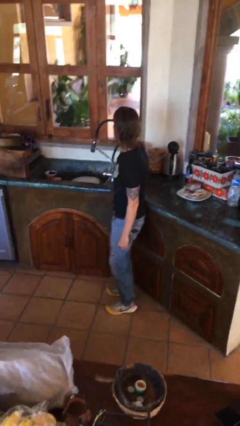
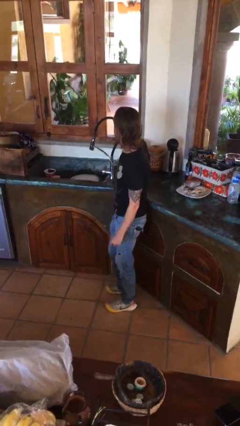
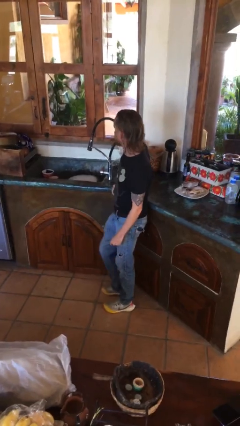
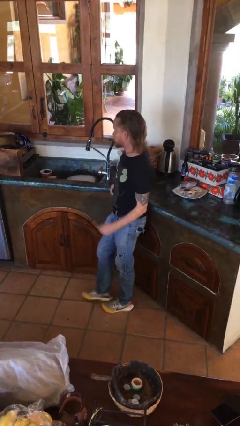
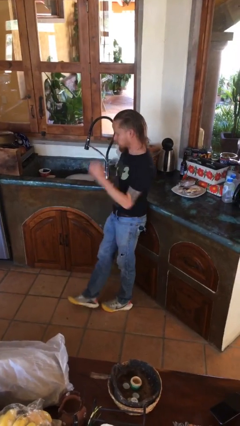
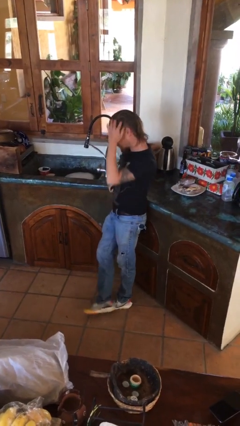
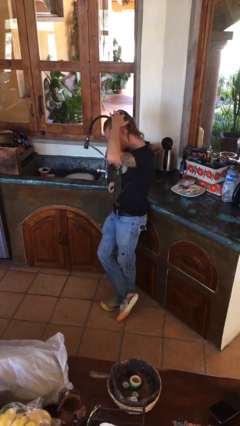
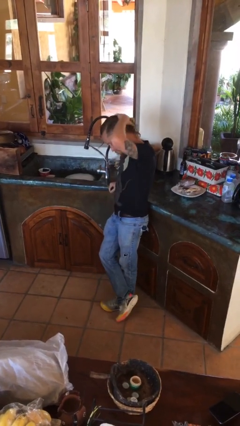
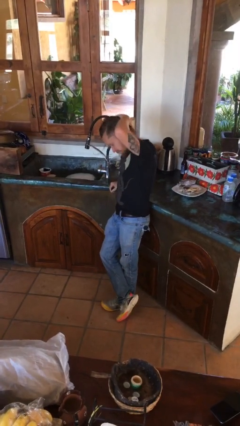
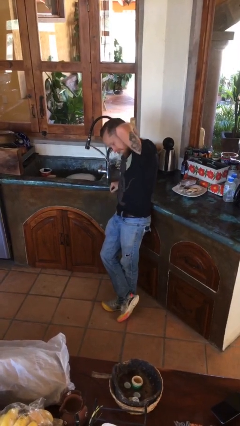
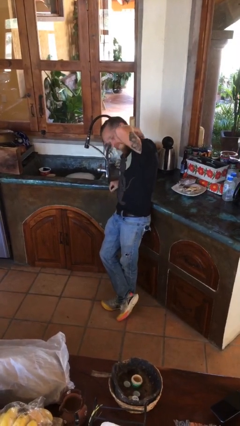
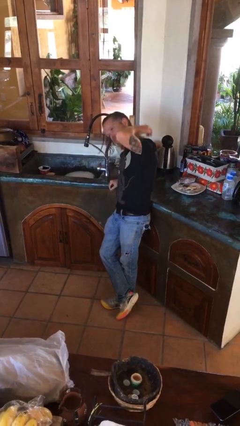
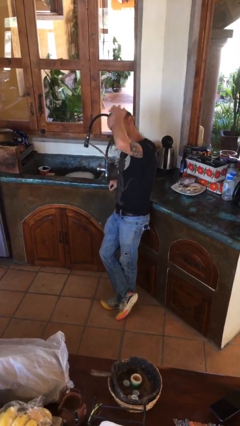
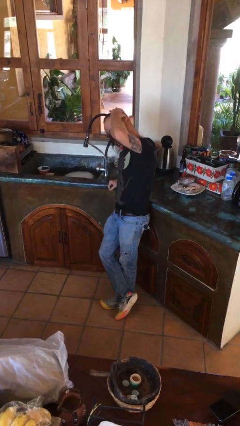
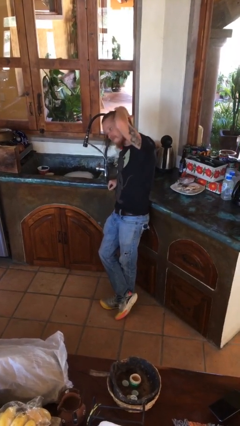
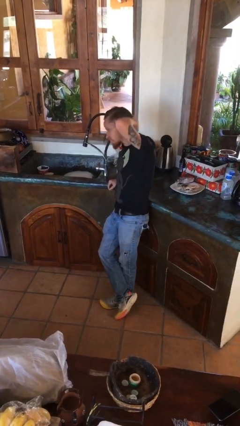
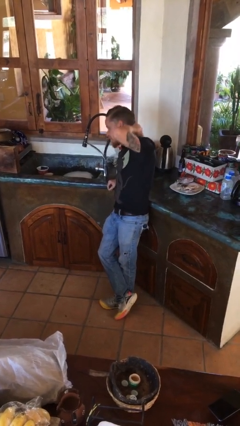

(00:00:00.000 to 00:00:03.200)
person strokes hair

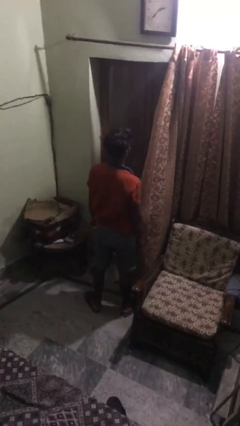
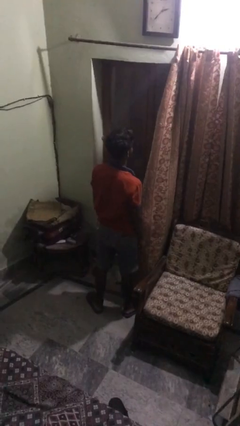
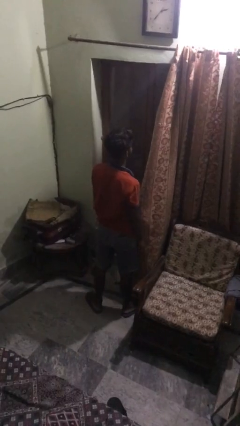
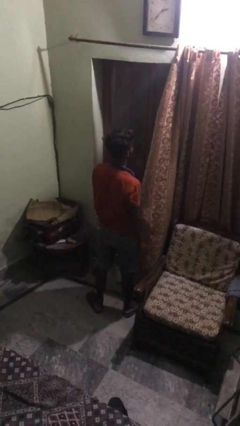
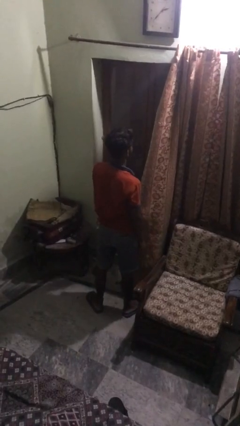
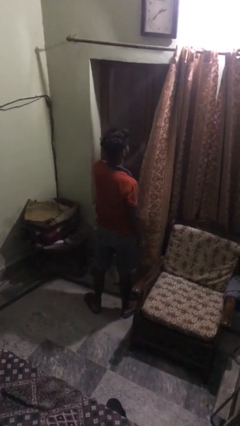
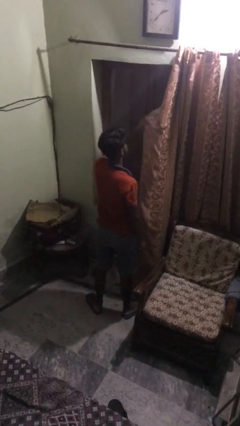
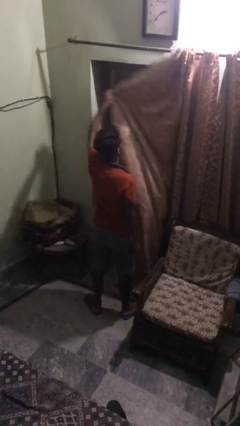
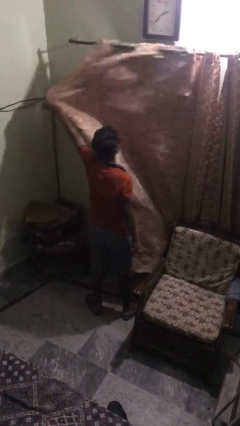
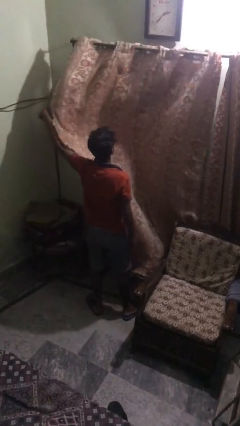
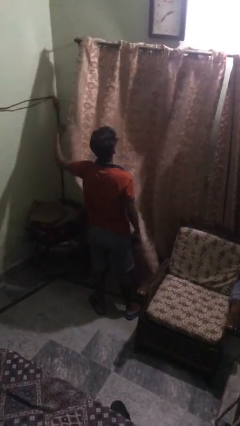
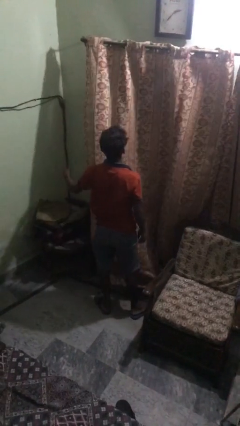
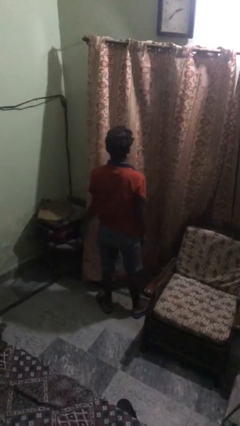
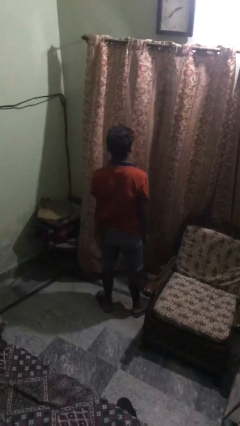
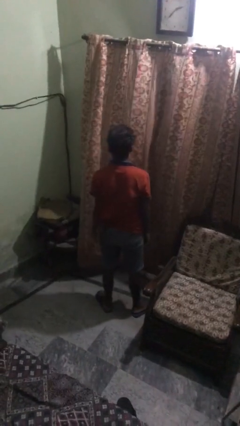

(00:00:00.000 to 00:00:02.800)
person closes curtains

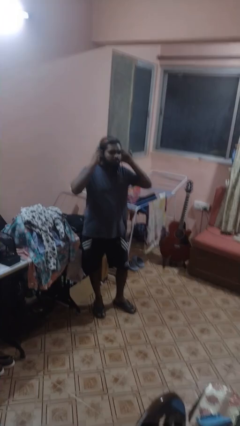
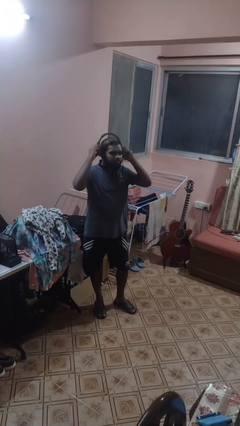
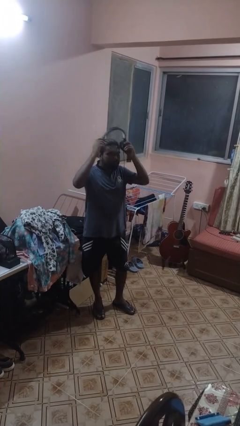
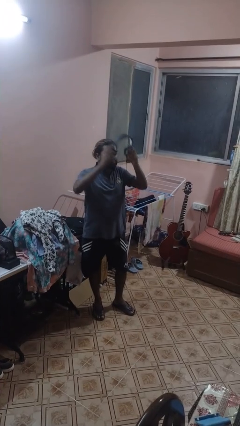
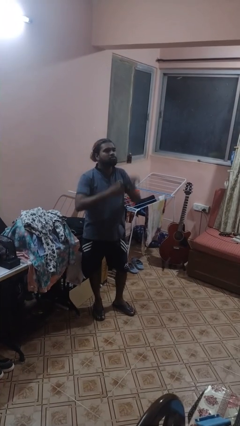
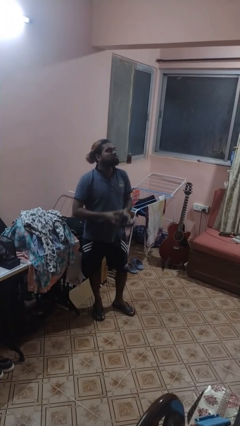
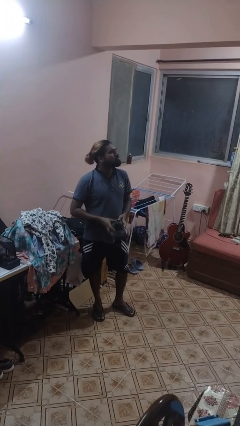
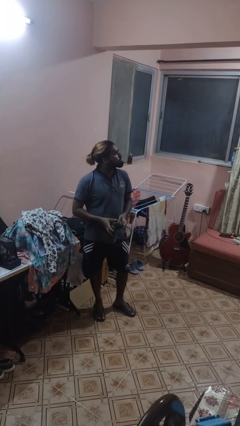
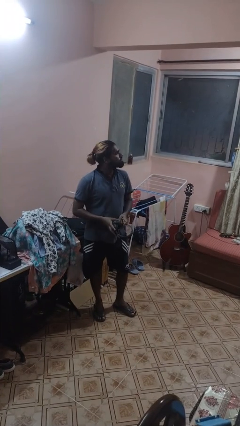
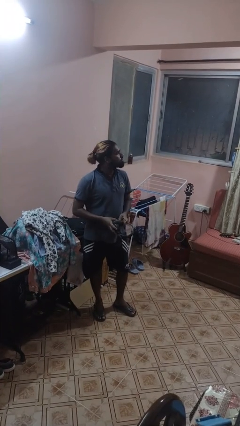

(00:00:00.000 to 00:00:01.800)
person takes off headphones

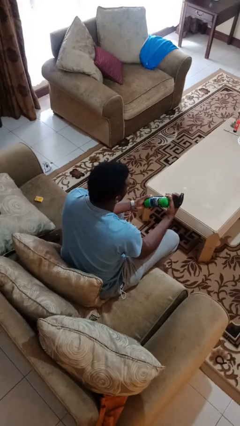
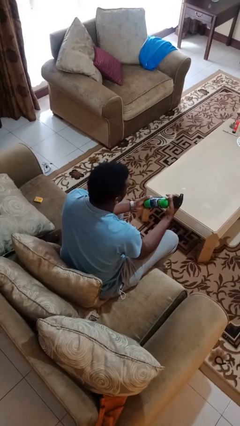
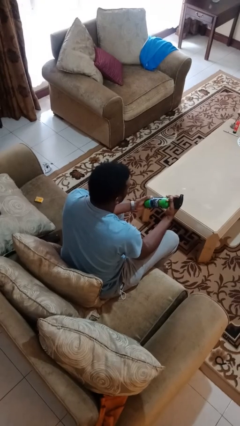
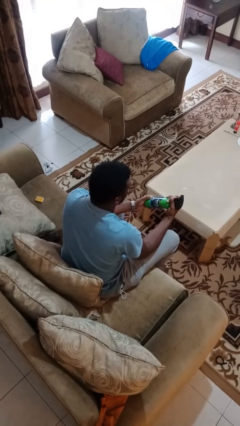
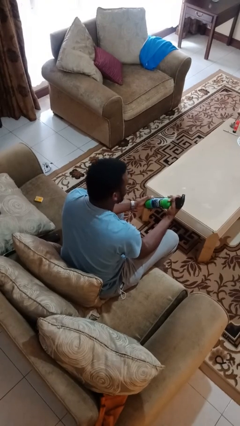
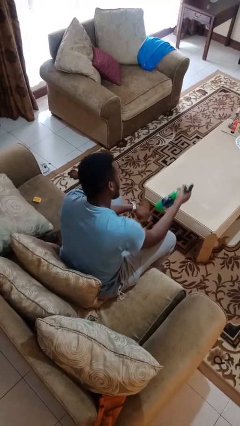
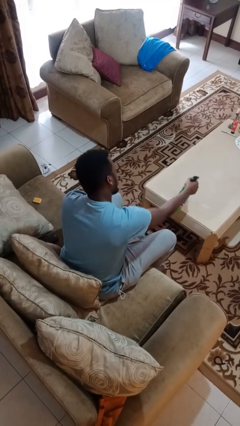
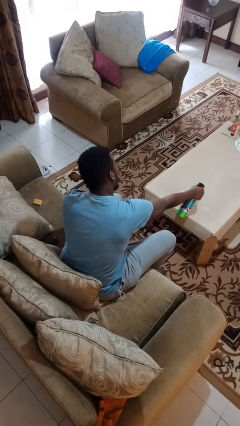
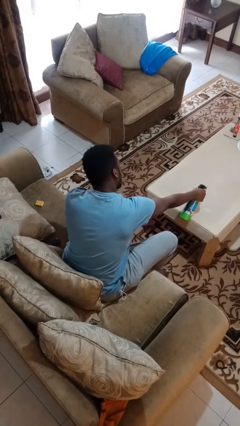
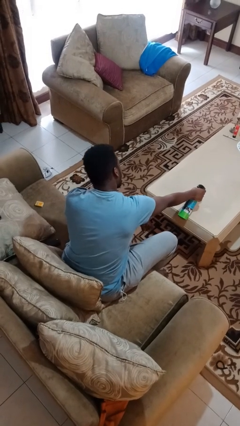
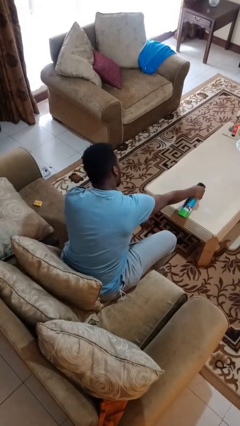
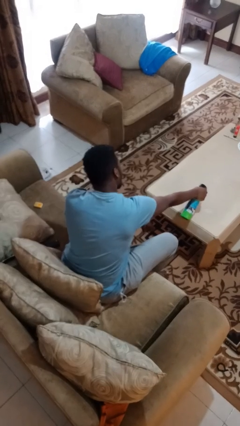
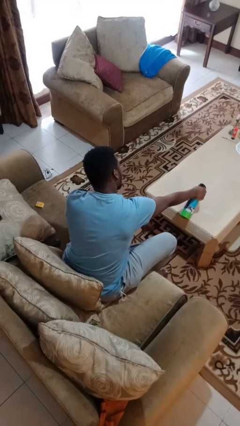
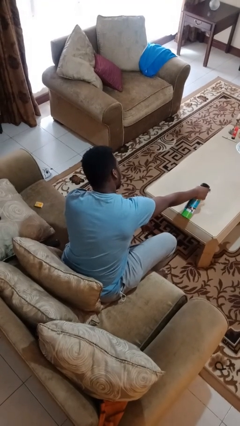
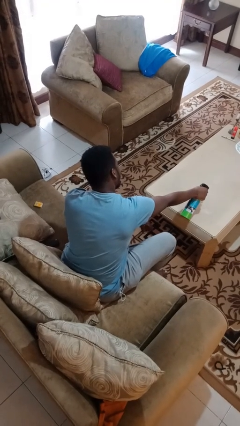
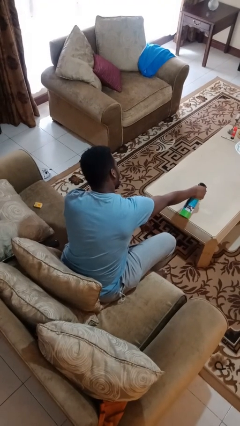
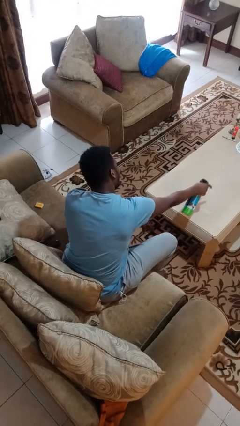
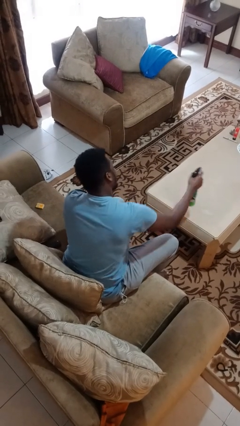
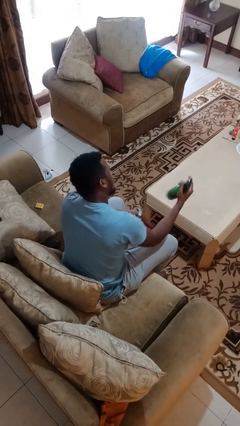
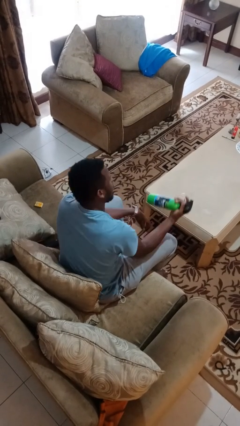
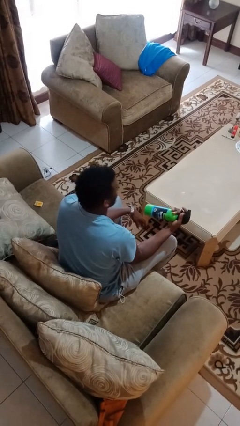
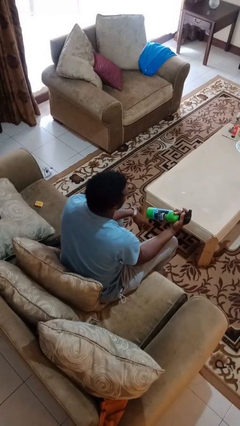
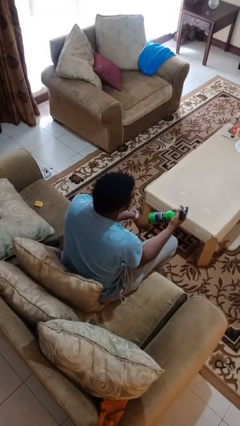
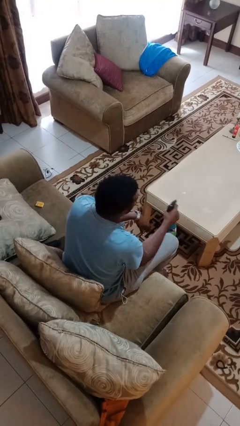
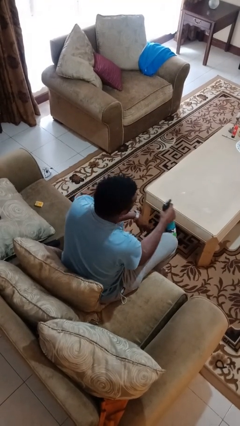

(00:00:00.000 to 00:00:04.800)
person sprays from bottle

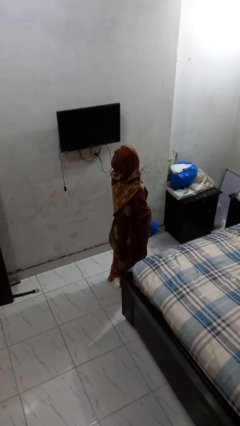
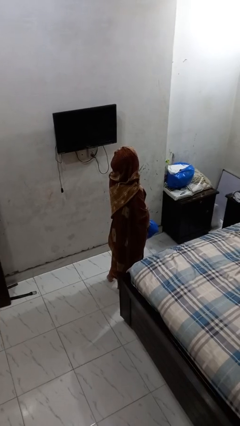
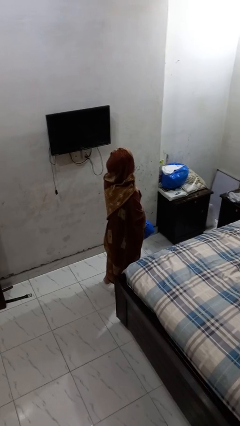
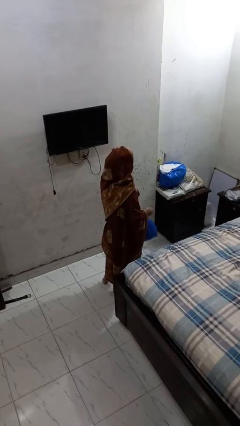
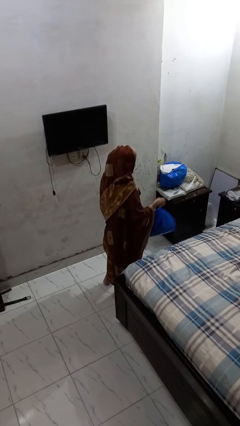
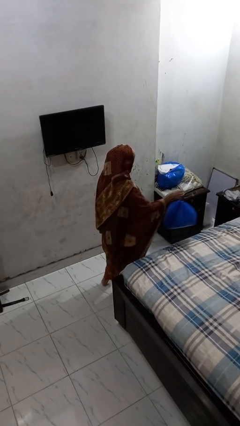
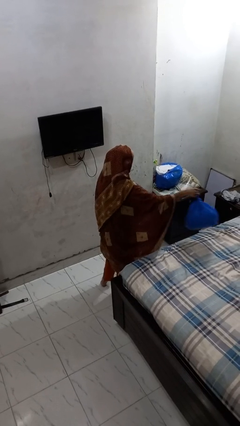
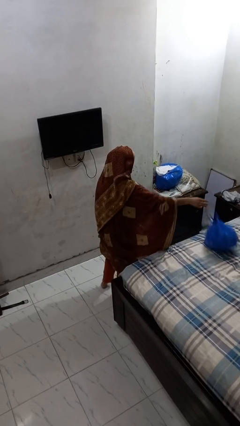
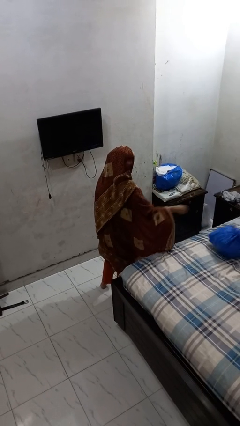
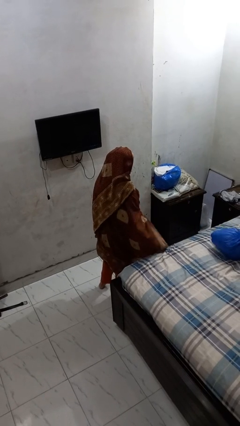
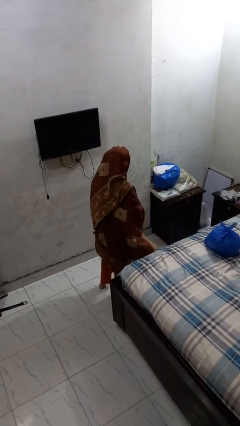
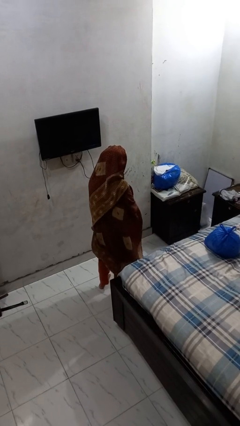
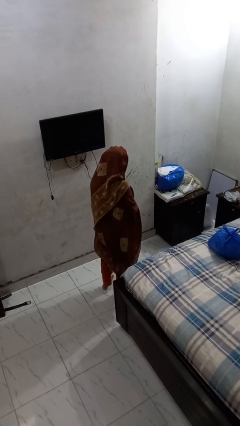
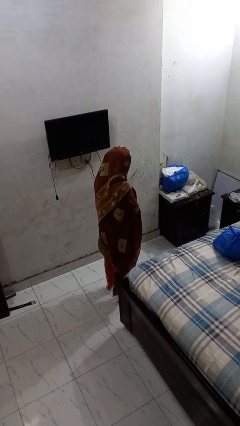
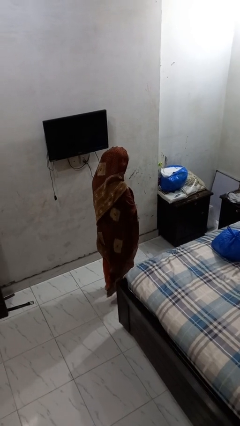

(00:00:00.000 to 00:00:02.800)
person throws object on bed

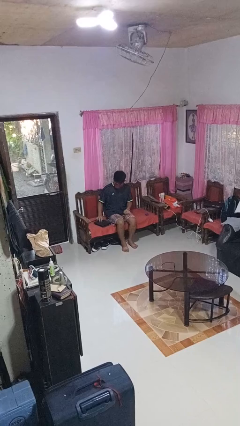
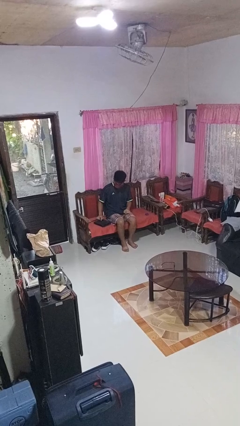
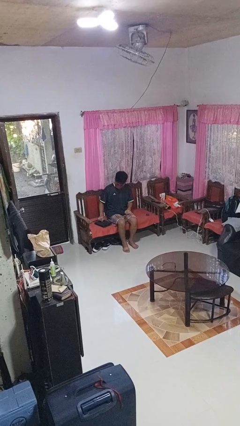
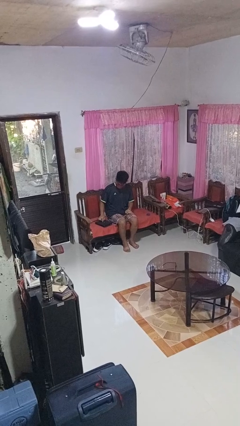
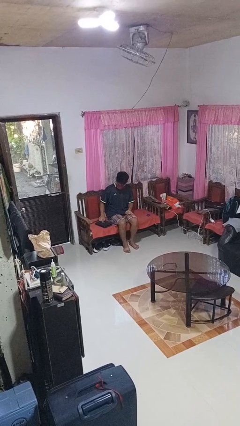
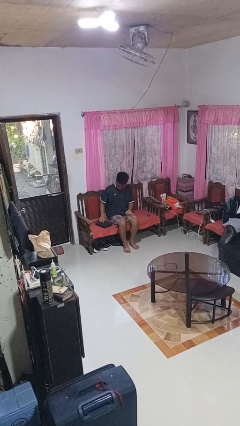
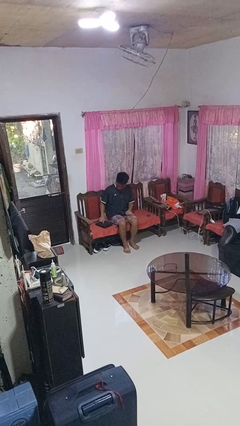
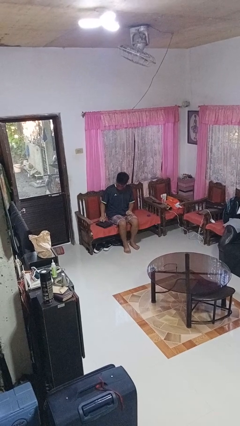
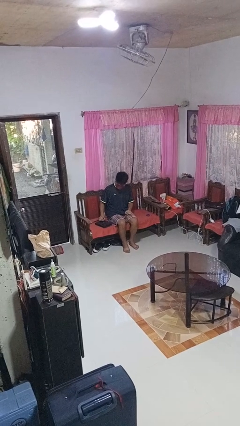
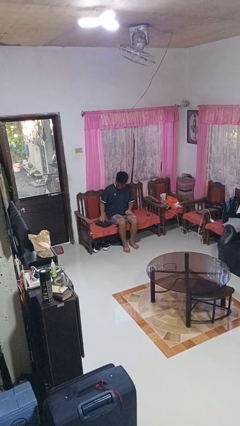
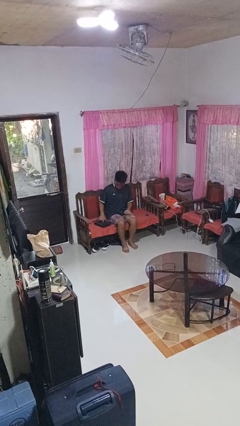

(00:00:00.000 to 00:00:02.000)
person taps object with finger
